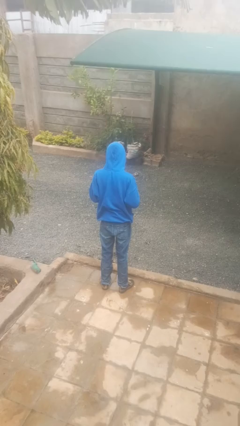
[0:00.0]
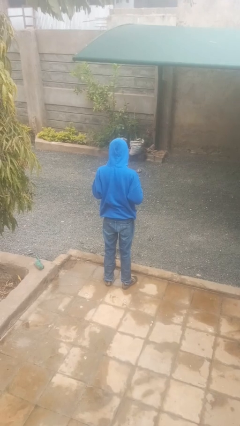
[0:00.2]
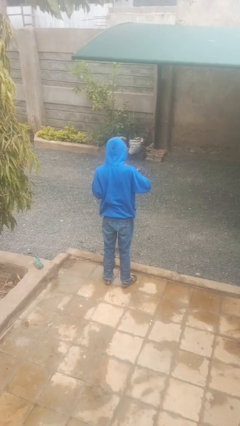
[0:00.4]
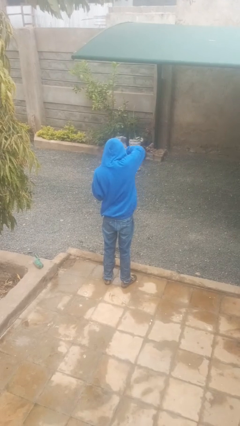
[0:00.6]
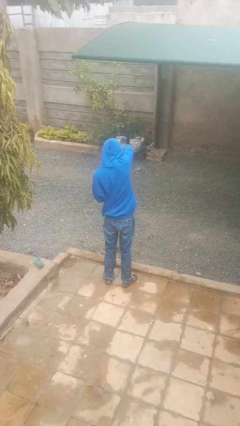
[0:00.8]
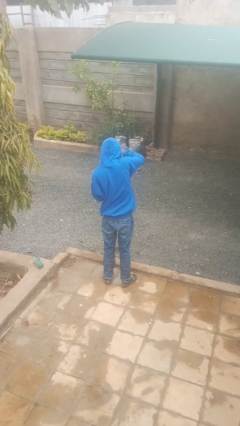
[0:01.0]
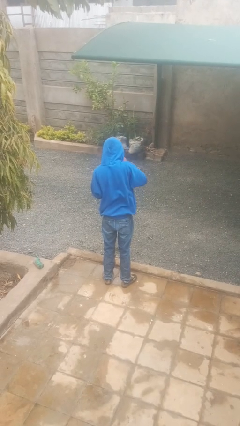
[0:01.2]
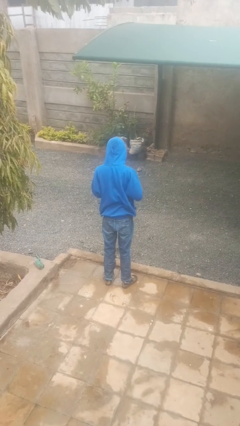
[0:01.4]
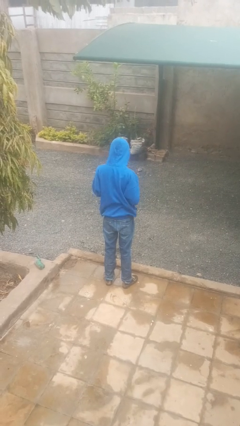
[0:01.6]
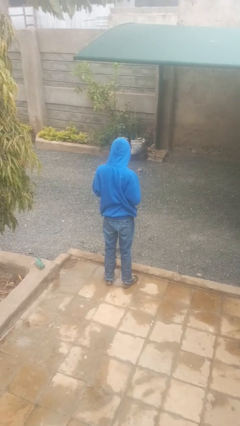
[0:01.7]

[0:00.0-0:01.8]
person punches

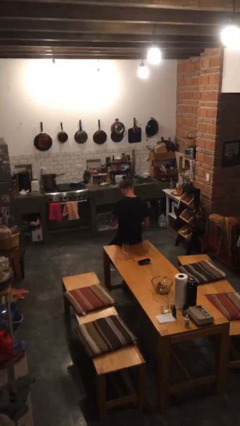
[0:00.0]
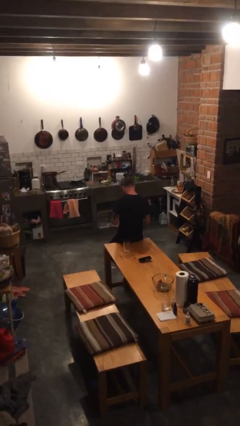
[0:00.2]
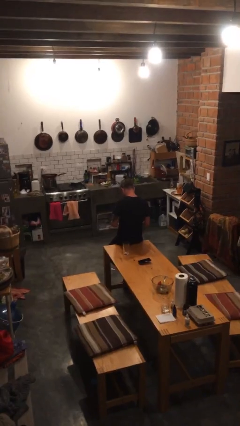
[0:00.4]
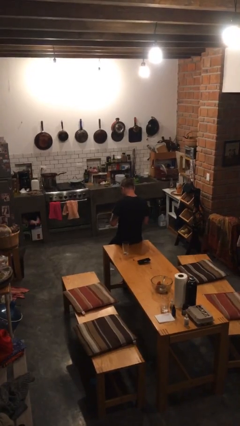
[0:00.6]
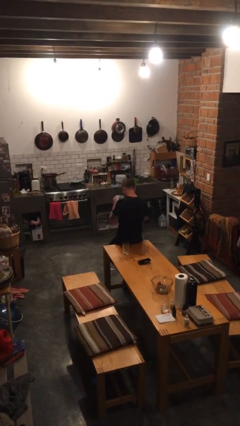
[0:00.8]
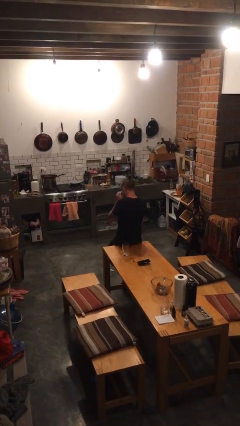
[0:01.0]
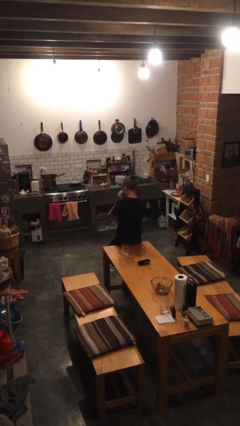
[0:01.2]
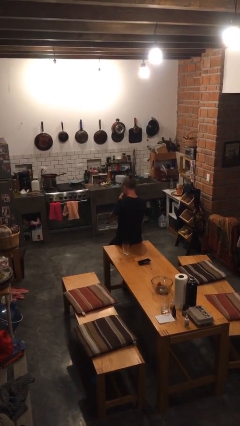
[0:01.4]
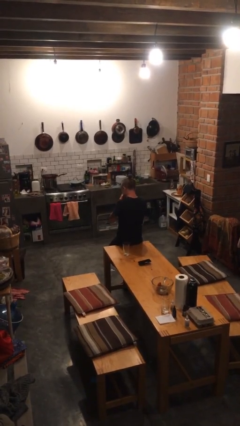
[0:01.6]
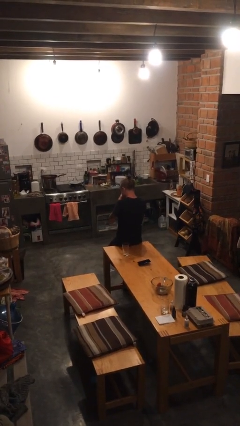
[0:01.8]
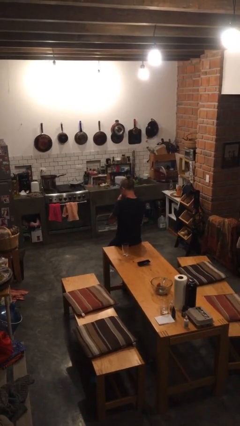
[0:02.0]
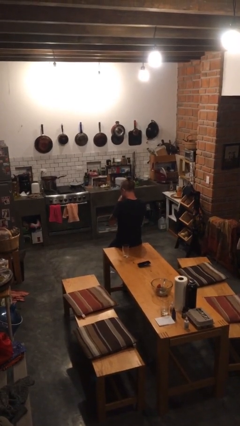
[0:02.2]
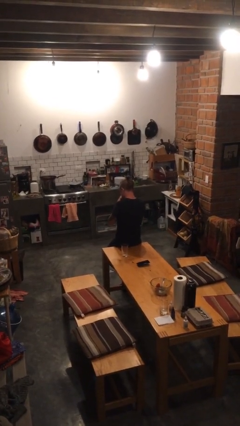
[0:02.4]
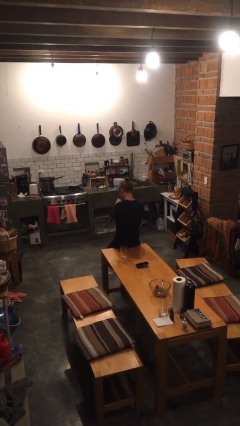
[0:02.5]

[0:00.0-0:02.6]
person blows nose

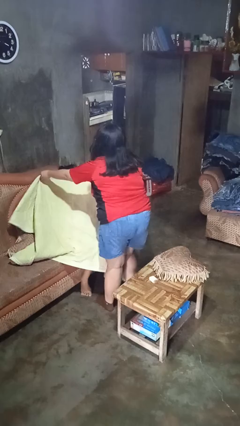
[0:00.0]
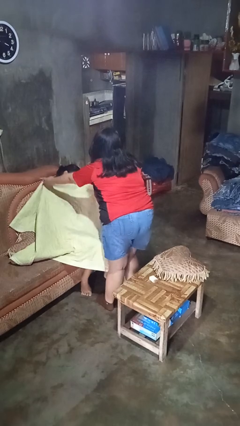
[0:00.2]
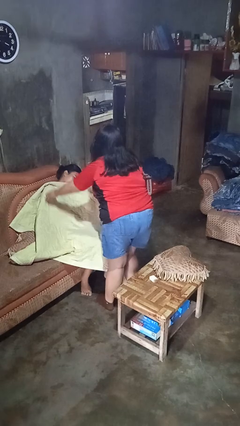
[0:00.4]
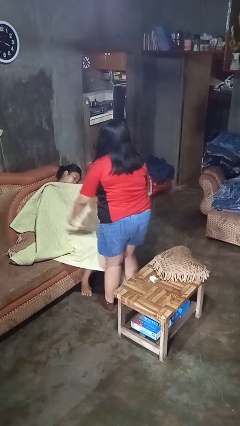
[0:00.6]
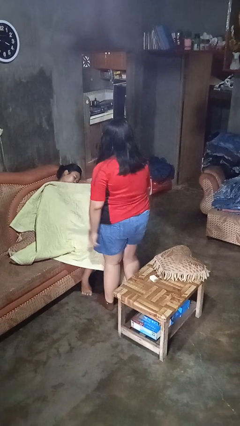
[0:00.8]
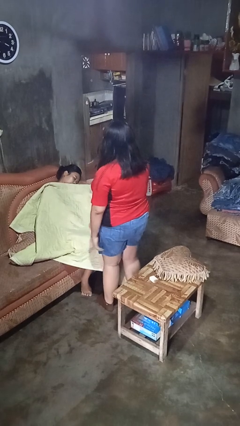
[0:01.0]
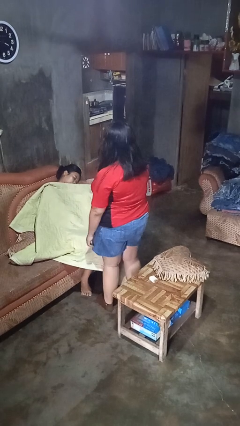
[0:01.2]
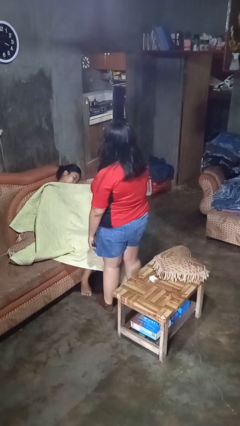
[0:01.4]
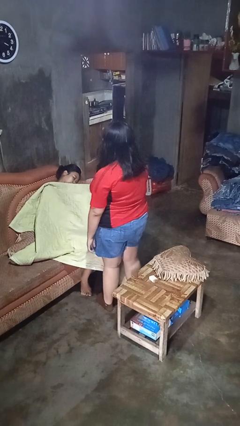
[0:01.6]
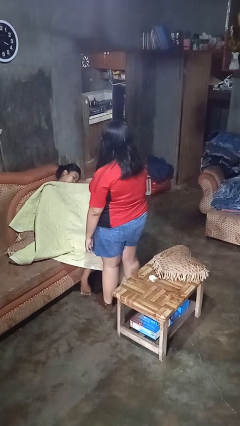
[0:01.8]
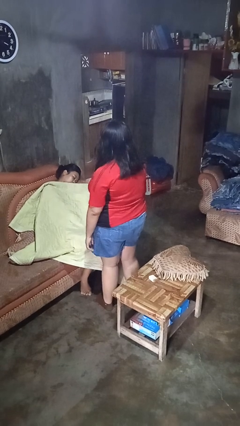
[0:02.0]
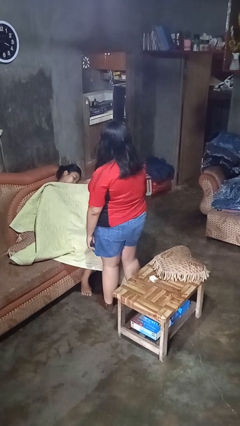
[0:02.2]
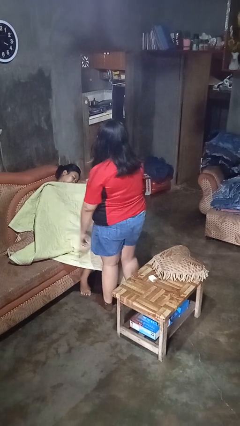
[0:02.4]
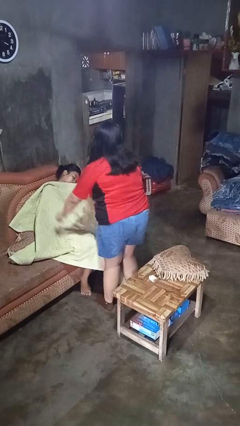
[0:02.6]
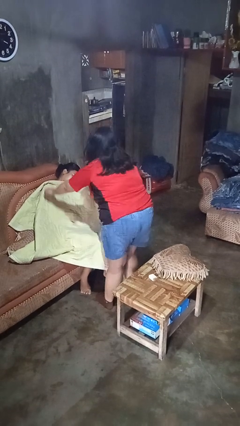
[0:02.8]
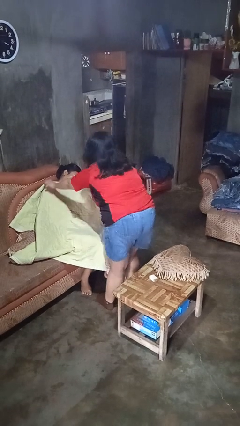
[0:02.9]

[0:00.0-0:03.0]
person covers friend with blanket

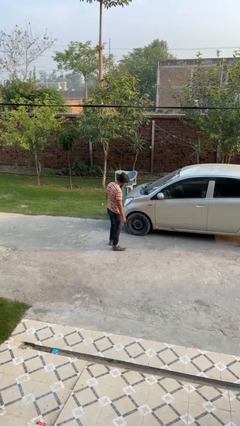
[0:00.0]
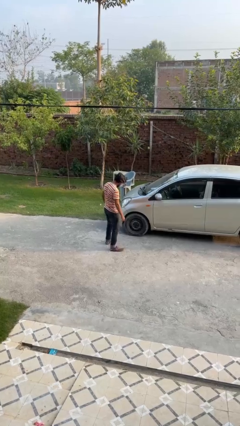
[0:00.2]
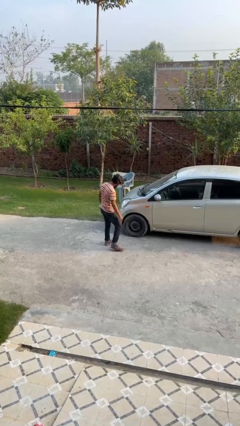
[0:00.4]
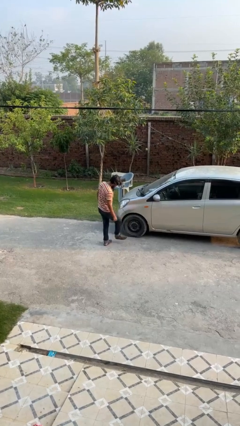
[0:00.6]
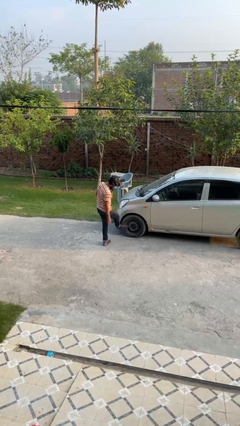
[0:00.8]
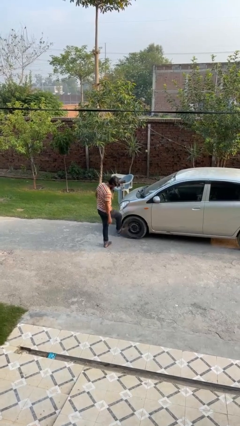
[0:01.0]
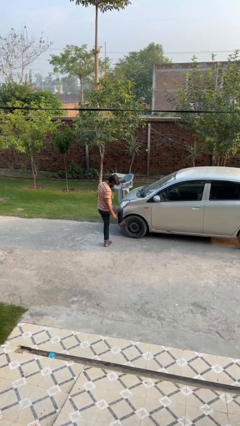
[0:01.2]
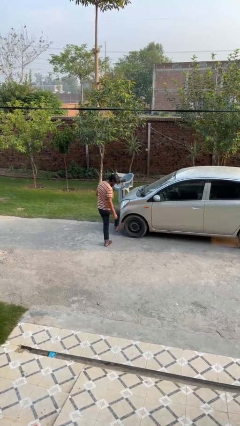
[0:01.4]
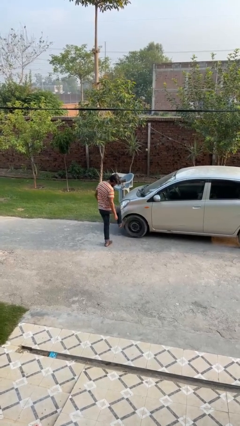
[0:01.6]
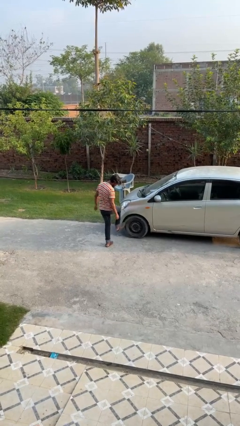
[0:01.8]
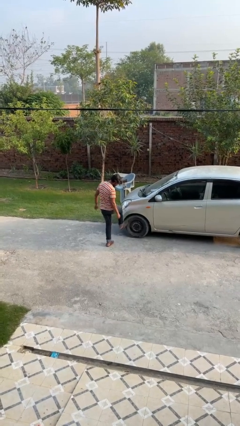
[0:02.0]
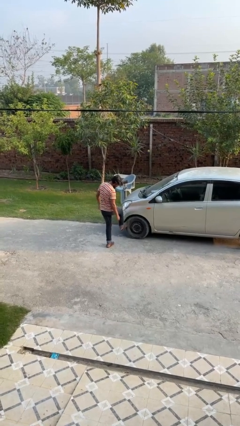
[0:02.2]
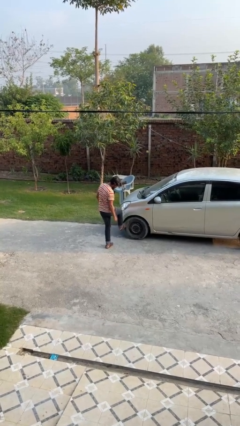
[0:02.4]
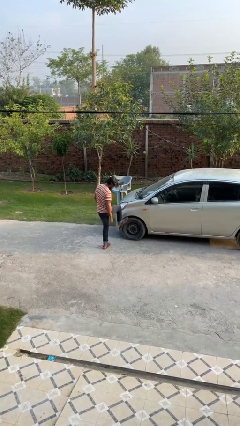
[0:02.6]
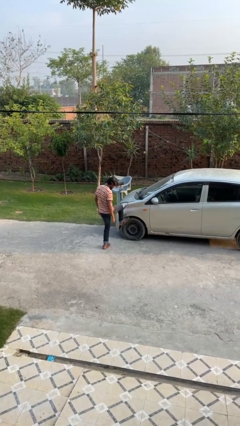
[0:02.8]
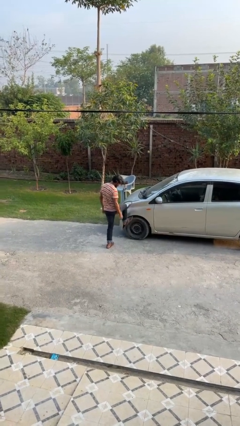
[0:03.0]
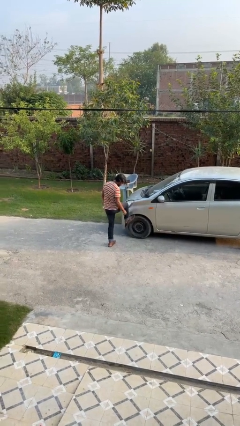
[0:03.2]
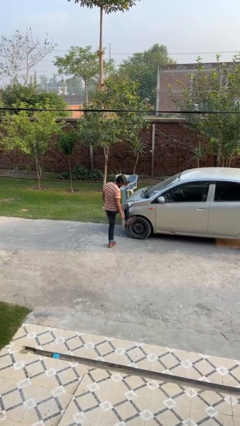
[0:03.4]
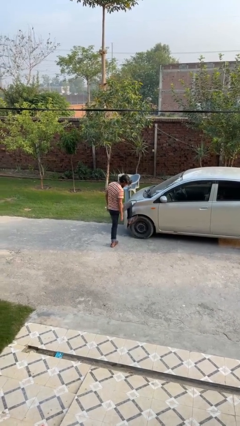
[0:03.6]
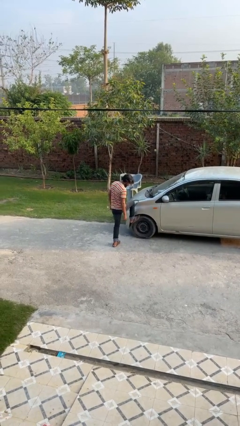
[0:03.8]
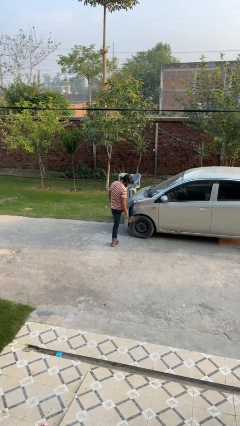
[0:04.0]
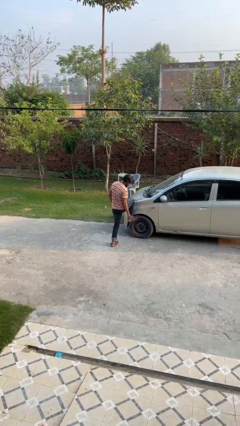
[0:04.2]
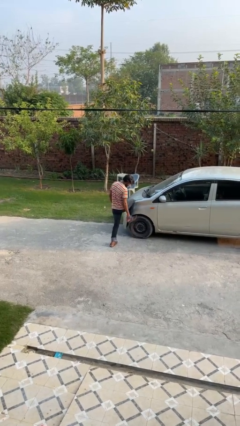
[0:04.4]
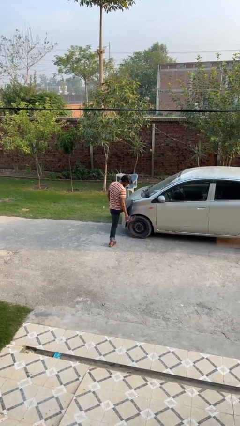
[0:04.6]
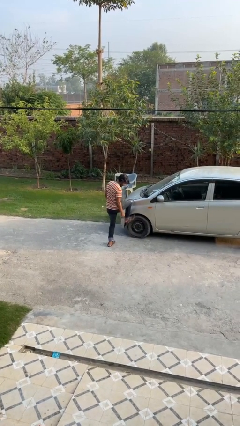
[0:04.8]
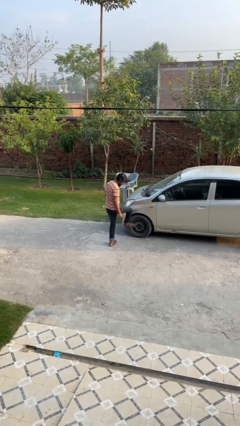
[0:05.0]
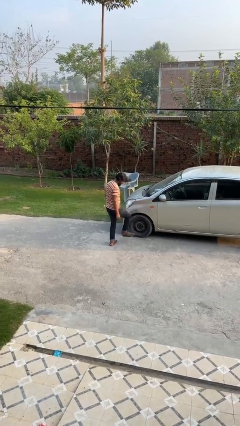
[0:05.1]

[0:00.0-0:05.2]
person kicks car tires

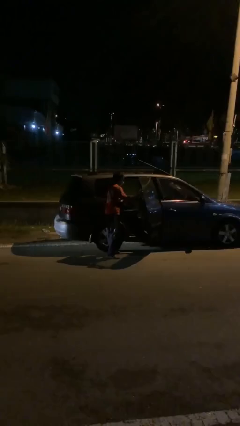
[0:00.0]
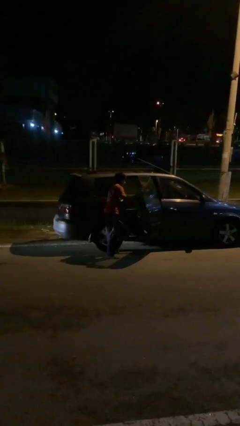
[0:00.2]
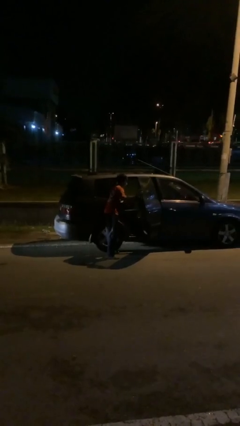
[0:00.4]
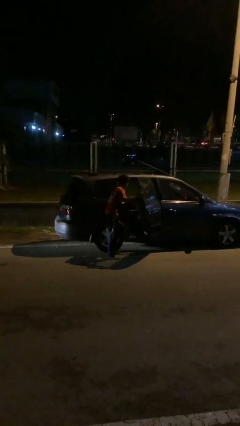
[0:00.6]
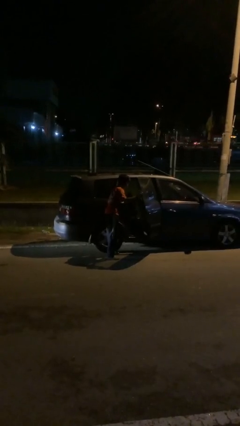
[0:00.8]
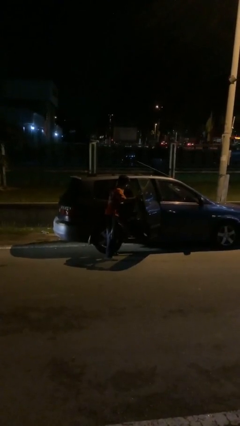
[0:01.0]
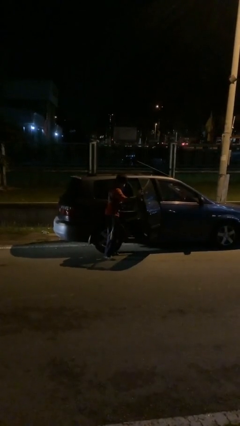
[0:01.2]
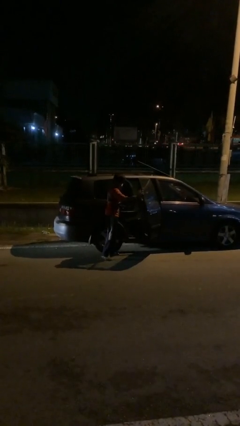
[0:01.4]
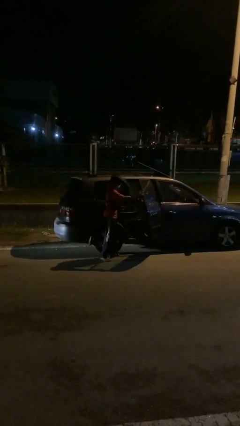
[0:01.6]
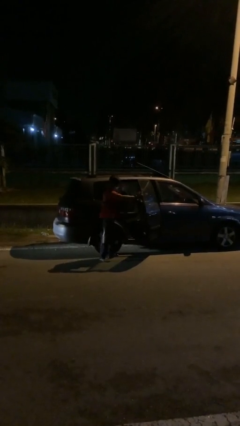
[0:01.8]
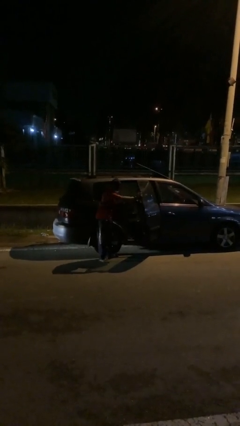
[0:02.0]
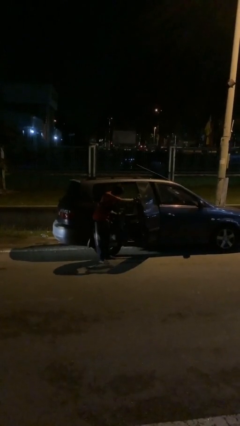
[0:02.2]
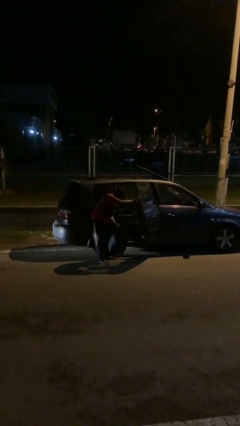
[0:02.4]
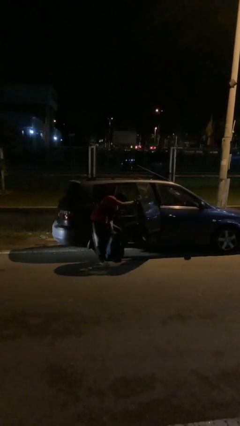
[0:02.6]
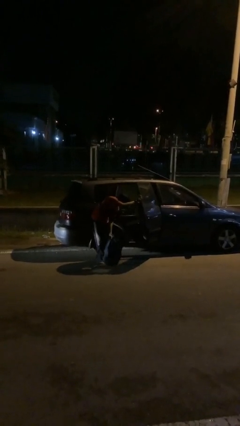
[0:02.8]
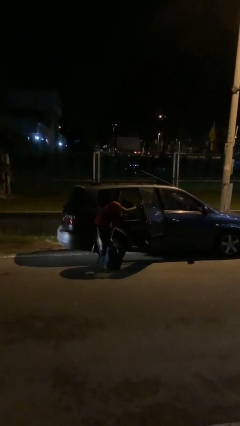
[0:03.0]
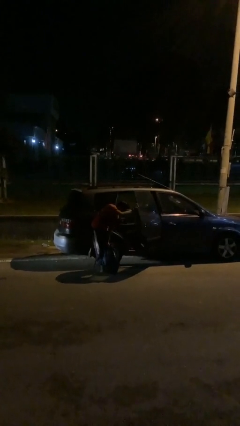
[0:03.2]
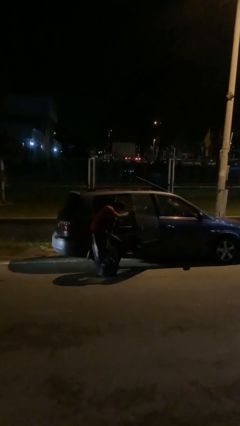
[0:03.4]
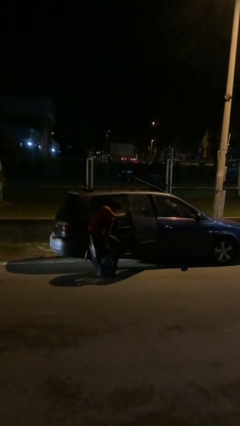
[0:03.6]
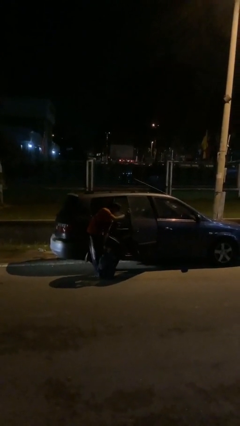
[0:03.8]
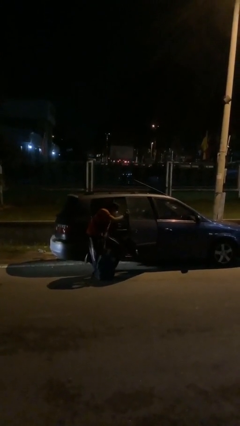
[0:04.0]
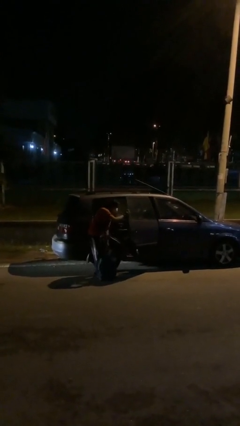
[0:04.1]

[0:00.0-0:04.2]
person unloads car

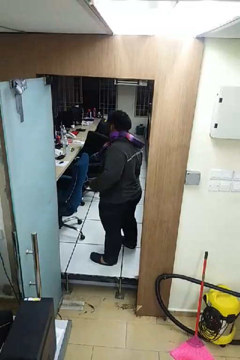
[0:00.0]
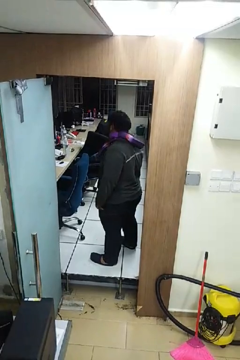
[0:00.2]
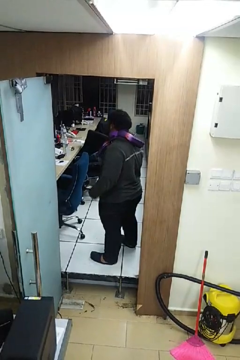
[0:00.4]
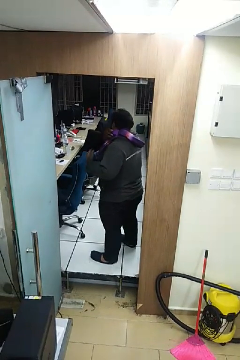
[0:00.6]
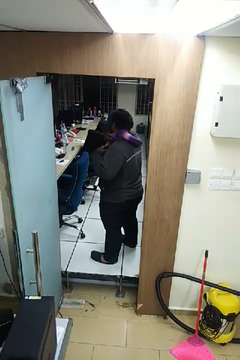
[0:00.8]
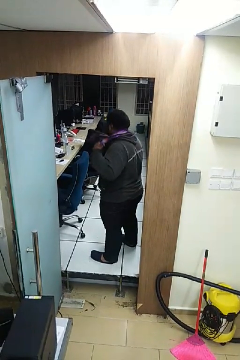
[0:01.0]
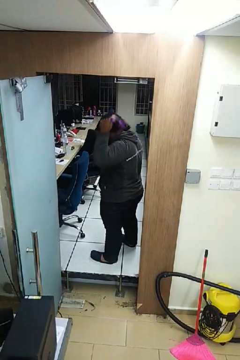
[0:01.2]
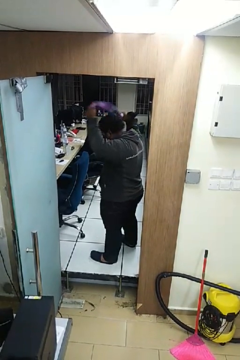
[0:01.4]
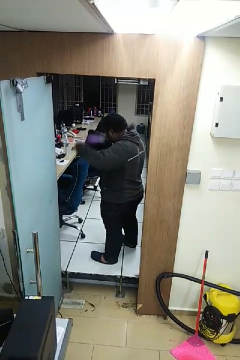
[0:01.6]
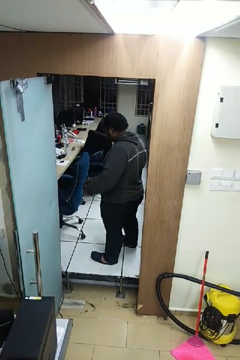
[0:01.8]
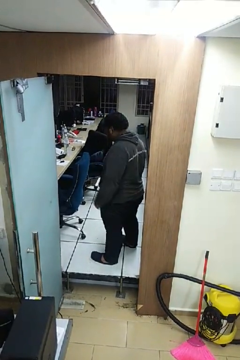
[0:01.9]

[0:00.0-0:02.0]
person takes off scarf
